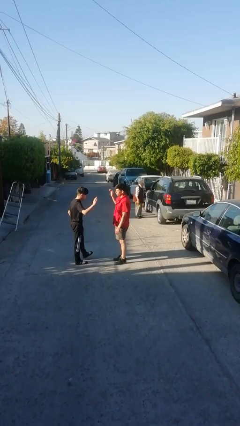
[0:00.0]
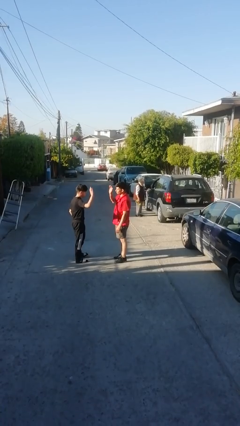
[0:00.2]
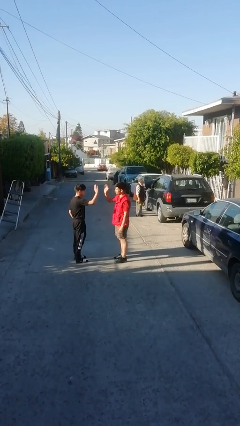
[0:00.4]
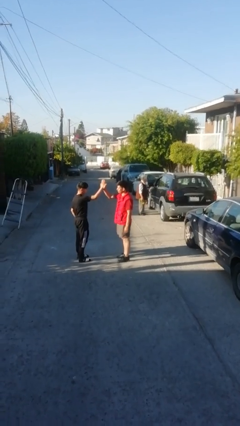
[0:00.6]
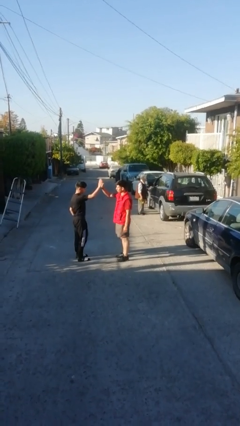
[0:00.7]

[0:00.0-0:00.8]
person highfives hand

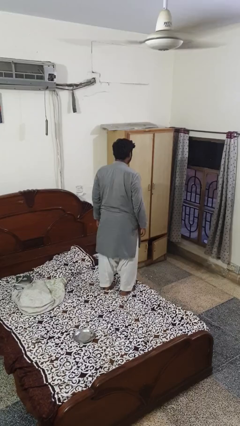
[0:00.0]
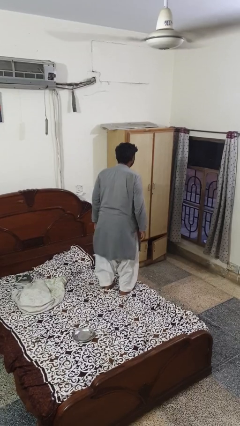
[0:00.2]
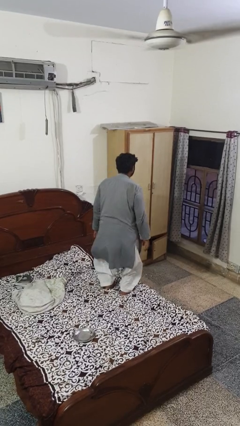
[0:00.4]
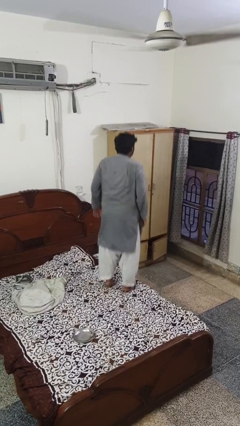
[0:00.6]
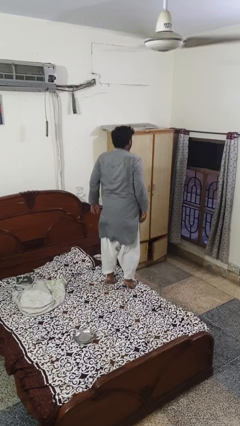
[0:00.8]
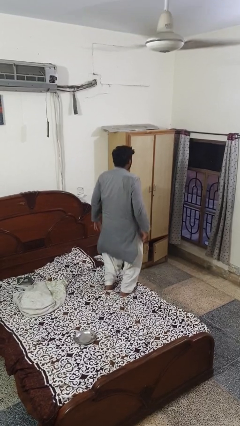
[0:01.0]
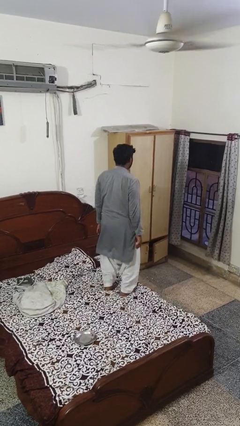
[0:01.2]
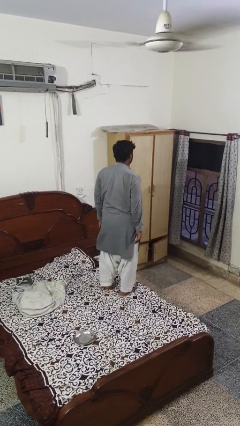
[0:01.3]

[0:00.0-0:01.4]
person jumps on bed

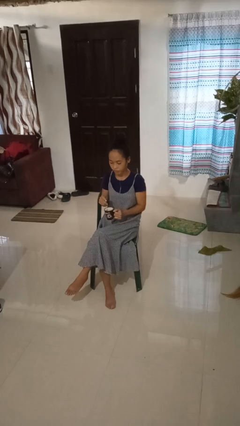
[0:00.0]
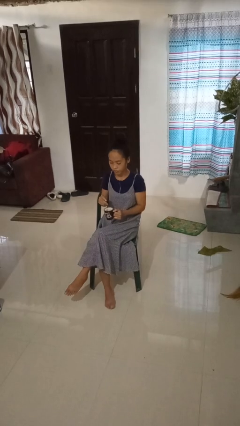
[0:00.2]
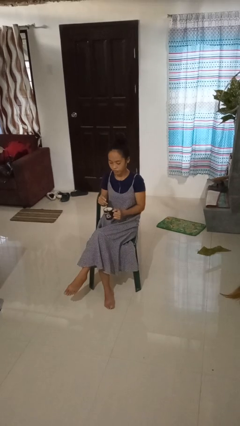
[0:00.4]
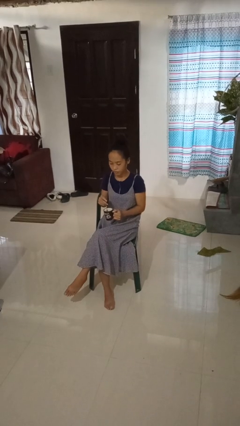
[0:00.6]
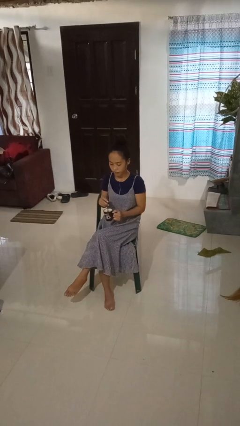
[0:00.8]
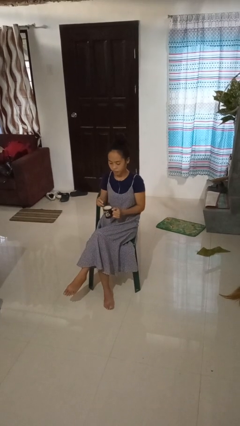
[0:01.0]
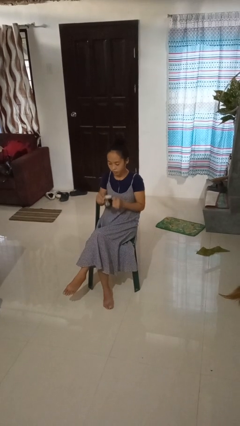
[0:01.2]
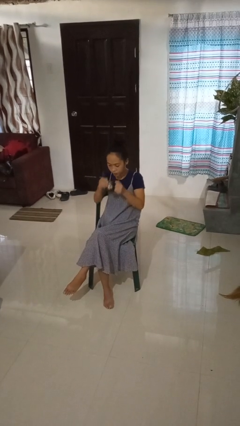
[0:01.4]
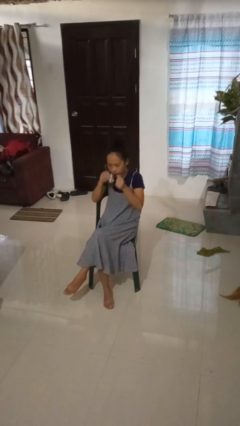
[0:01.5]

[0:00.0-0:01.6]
person stirs mug

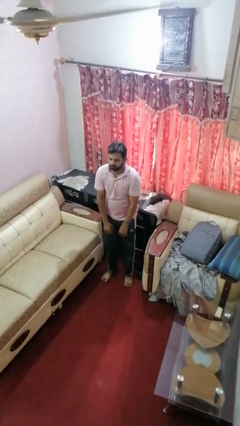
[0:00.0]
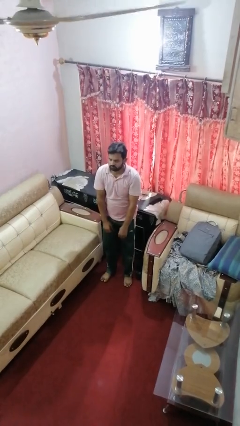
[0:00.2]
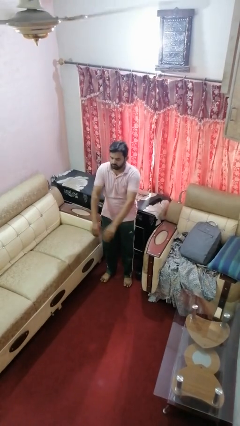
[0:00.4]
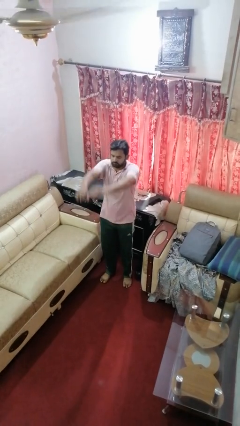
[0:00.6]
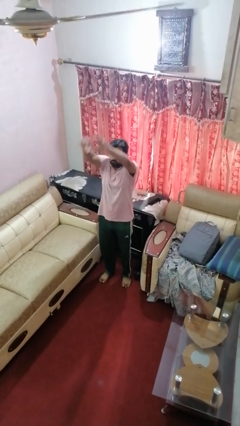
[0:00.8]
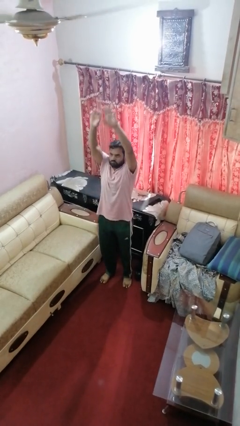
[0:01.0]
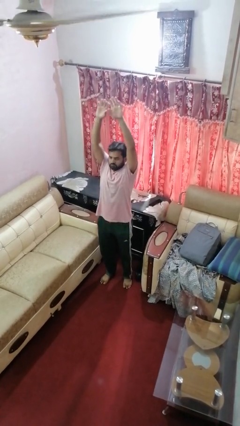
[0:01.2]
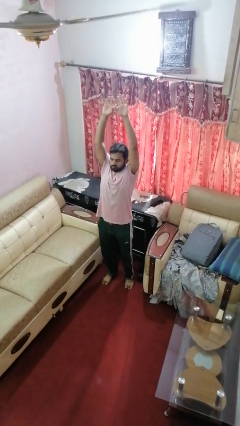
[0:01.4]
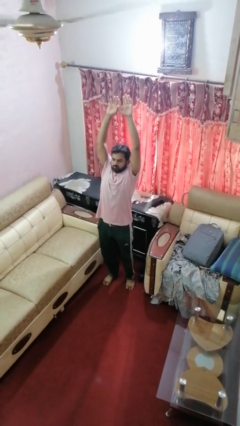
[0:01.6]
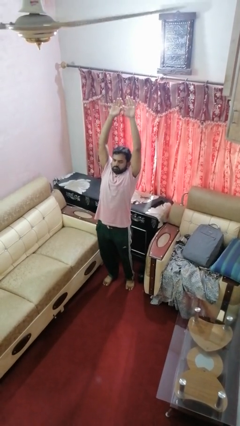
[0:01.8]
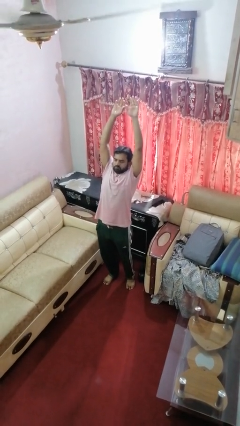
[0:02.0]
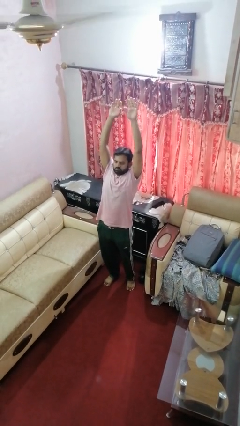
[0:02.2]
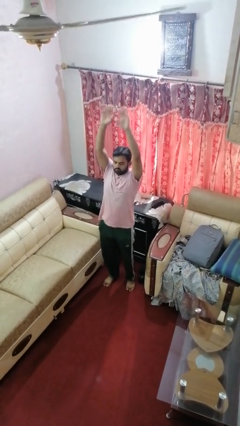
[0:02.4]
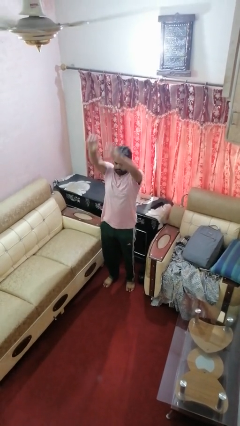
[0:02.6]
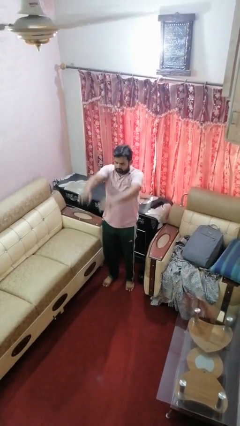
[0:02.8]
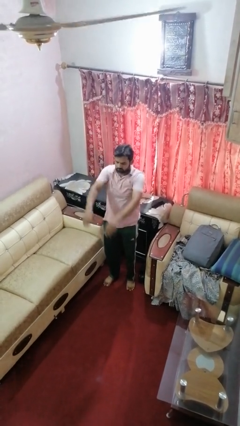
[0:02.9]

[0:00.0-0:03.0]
person stretches arms over head

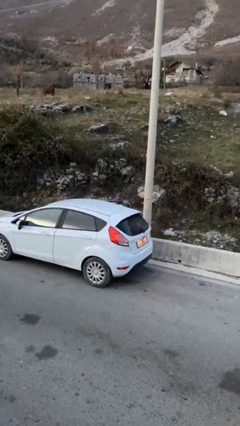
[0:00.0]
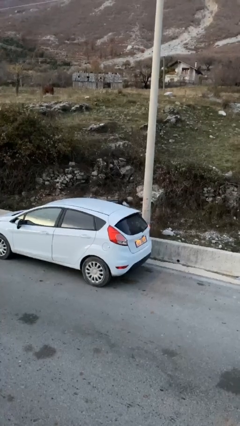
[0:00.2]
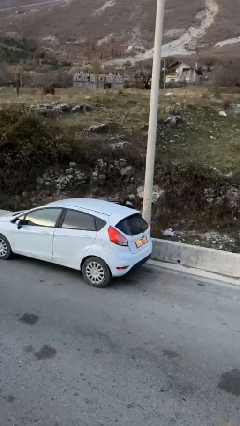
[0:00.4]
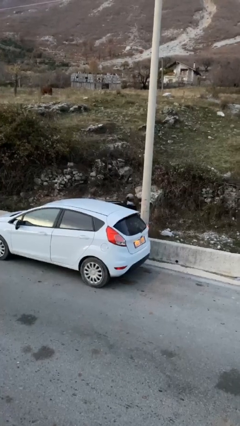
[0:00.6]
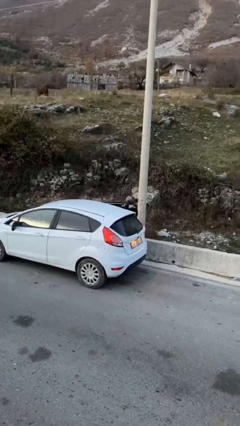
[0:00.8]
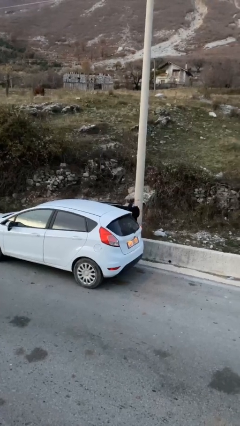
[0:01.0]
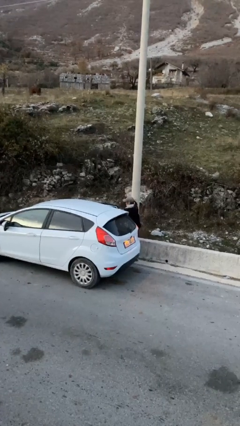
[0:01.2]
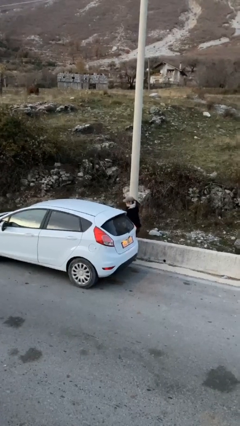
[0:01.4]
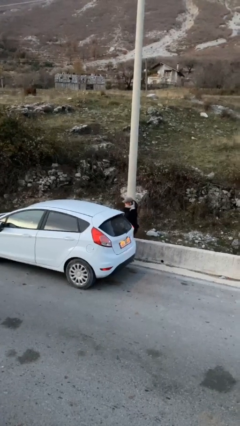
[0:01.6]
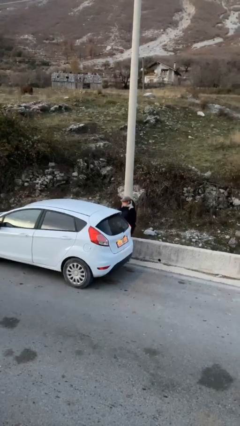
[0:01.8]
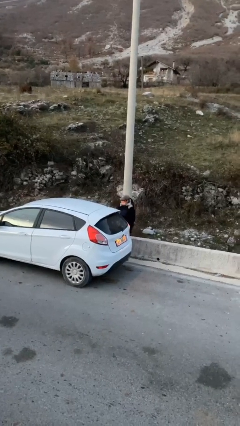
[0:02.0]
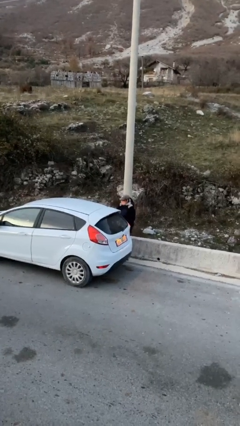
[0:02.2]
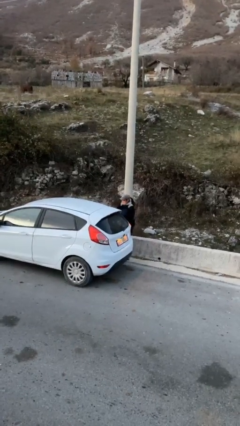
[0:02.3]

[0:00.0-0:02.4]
car drops off person

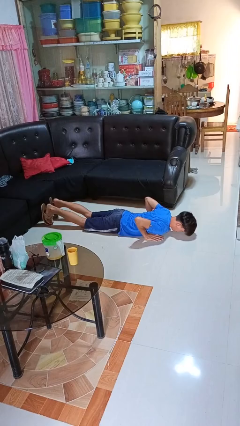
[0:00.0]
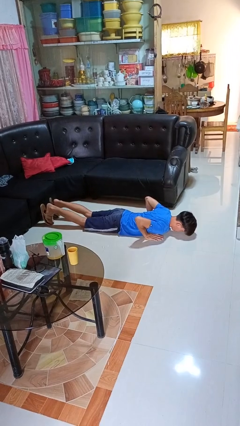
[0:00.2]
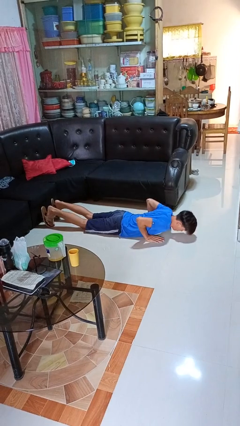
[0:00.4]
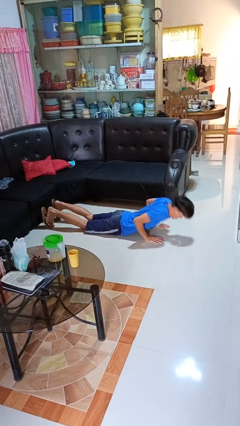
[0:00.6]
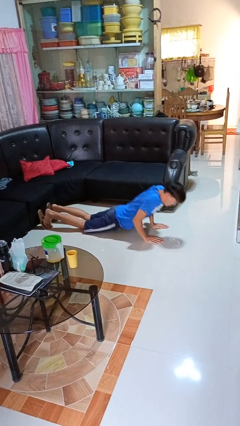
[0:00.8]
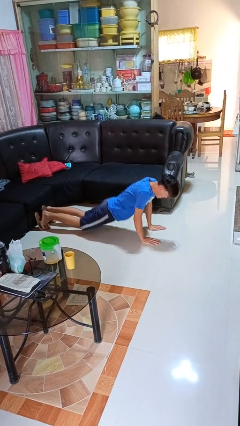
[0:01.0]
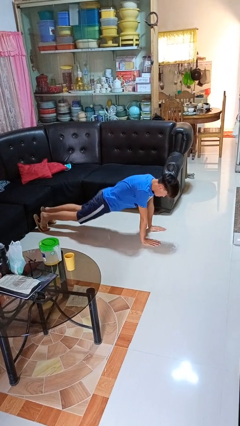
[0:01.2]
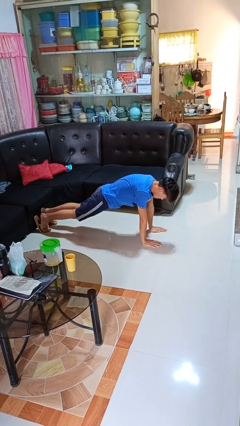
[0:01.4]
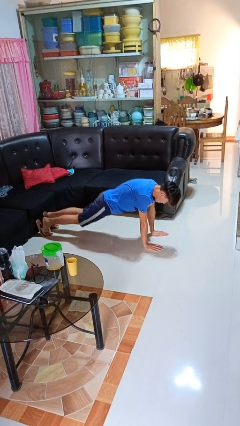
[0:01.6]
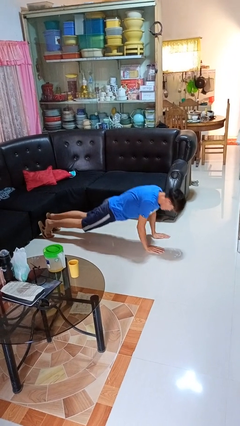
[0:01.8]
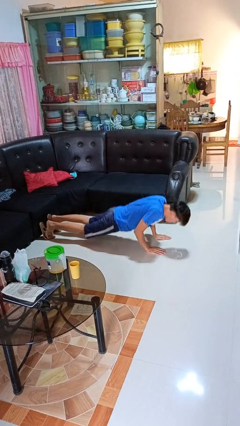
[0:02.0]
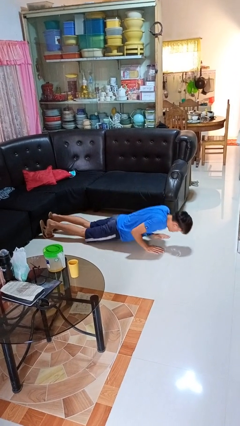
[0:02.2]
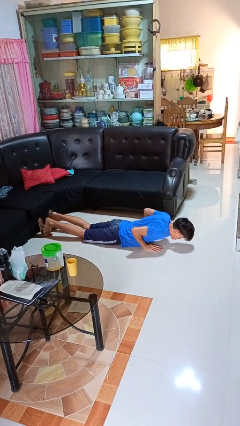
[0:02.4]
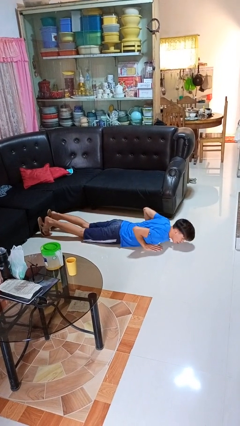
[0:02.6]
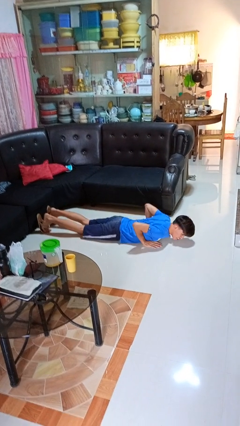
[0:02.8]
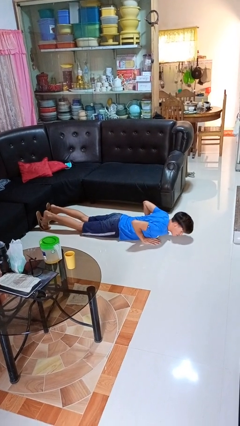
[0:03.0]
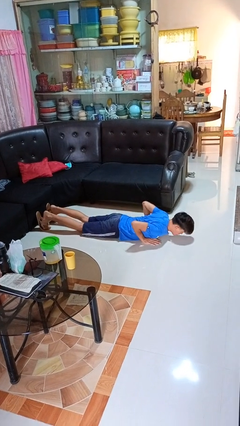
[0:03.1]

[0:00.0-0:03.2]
person exercises with pushup

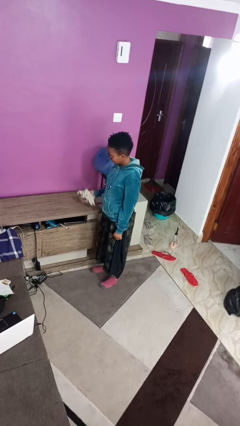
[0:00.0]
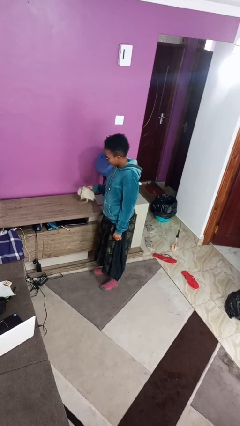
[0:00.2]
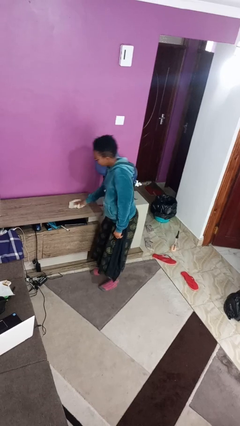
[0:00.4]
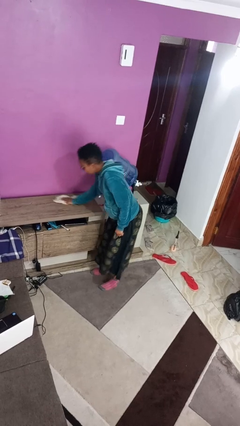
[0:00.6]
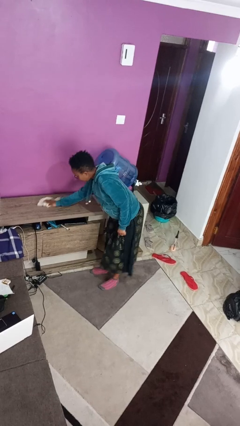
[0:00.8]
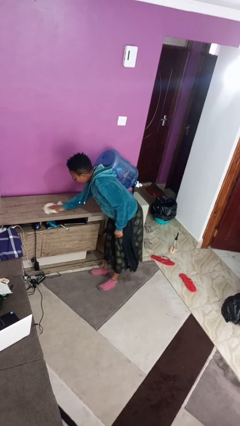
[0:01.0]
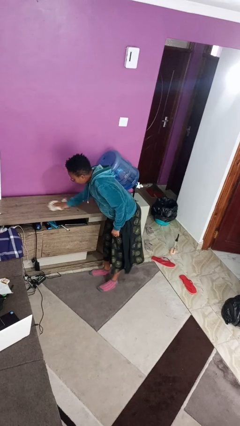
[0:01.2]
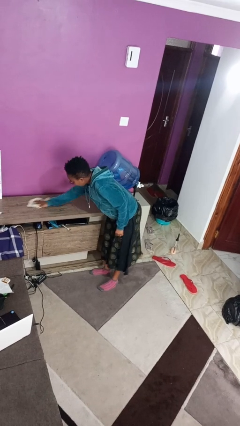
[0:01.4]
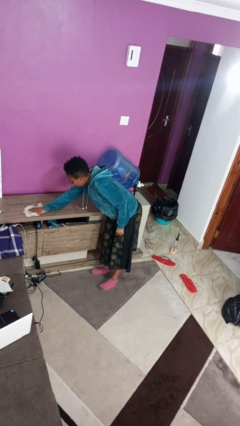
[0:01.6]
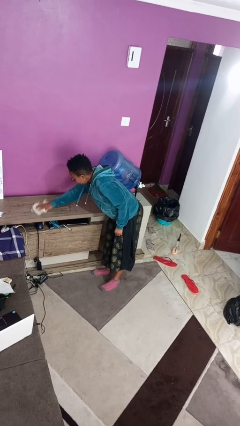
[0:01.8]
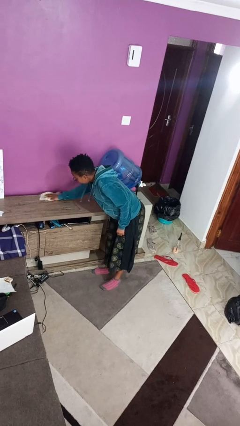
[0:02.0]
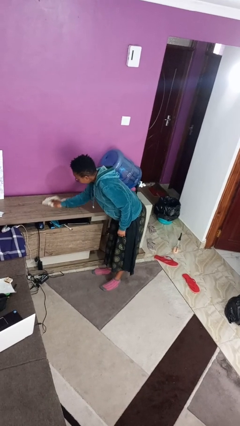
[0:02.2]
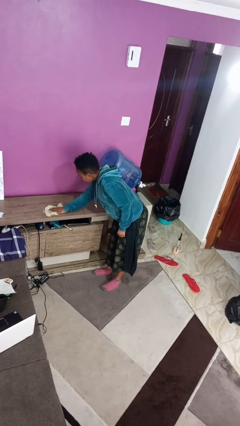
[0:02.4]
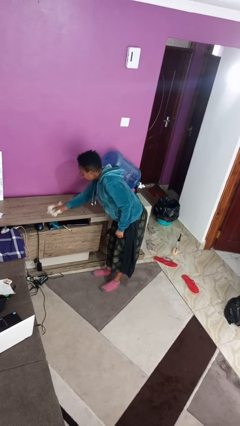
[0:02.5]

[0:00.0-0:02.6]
person cleans table with rag

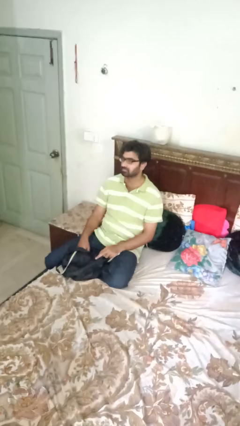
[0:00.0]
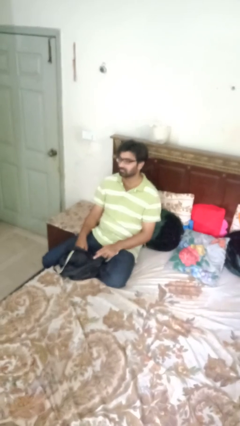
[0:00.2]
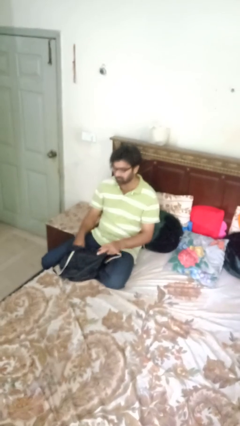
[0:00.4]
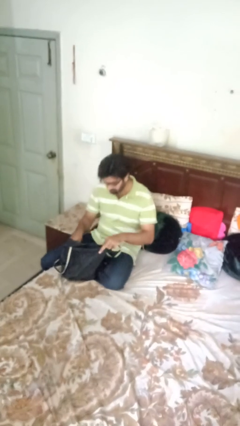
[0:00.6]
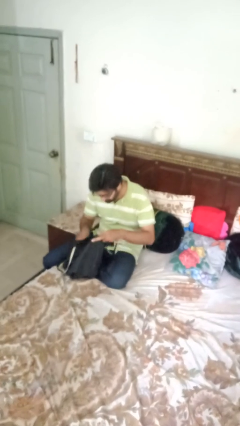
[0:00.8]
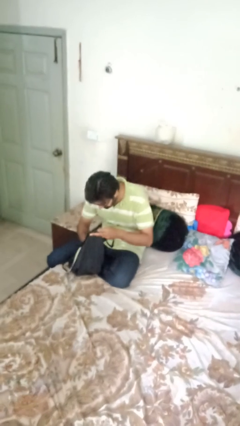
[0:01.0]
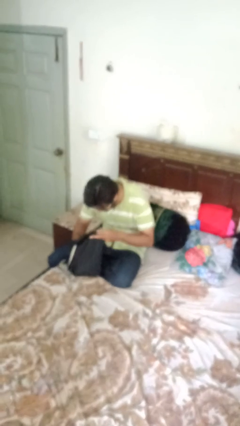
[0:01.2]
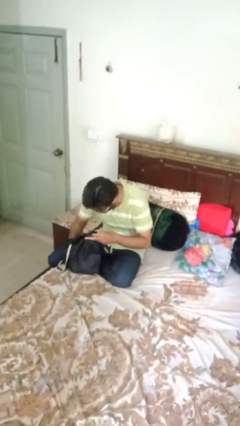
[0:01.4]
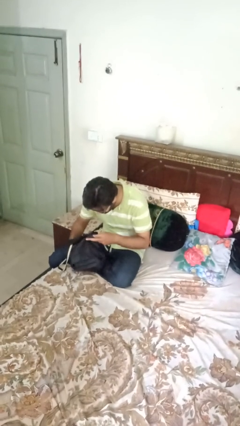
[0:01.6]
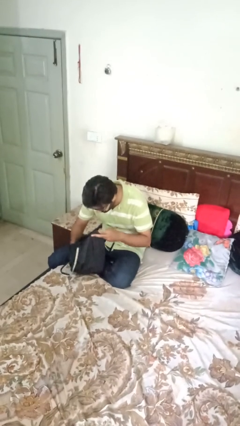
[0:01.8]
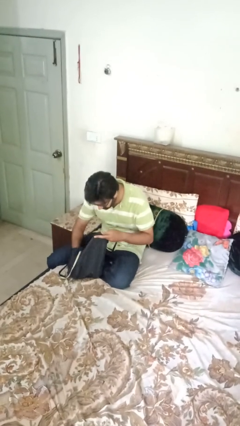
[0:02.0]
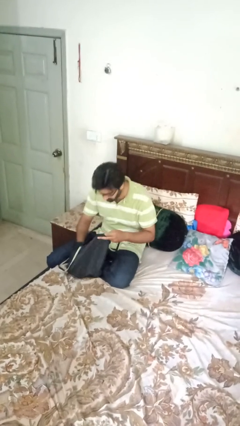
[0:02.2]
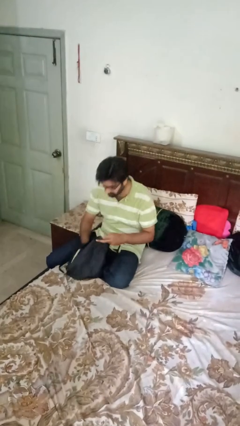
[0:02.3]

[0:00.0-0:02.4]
person searches in bag
